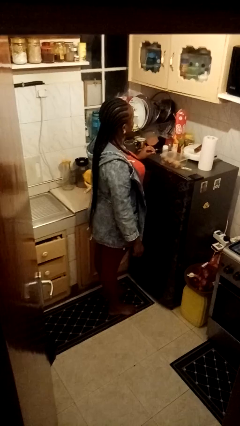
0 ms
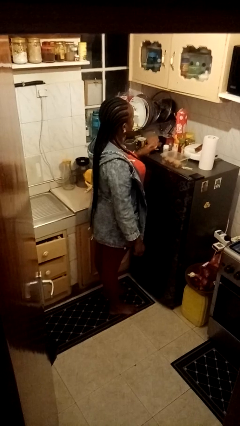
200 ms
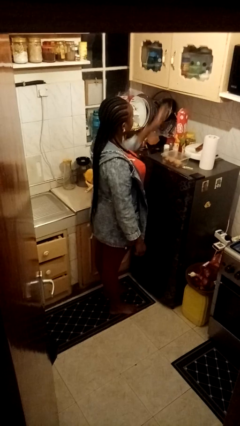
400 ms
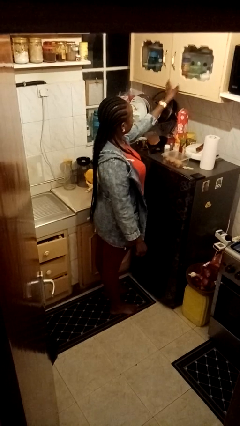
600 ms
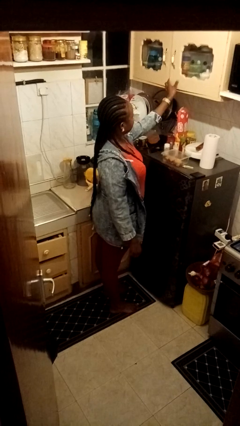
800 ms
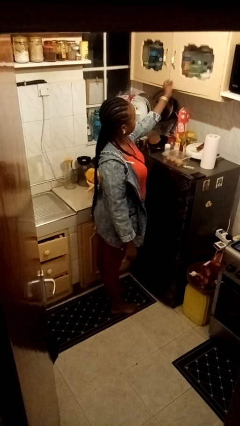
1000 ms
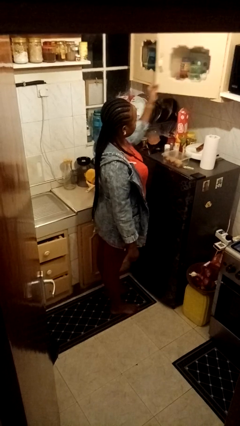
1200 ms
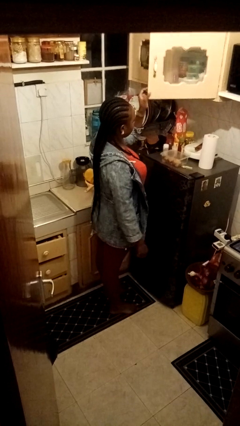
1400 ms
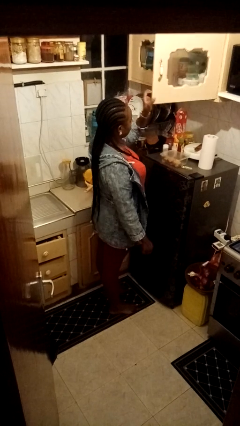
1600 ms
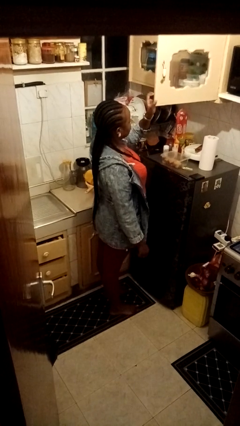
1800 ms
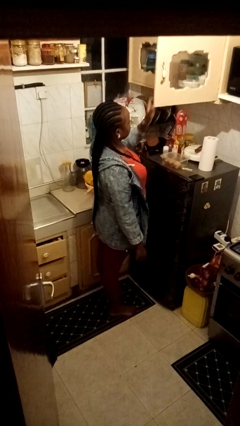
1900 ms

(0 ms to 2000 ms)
person opens cabinet

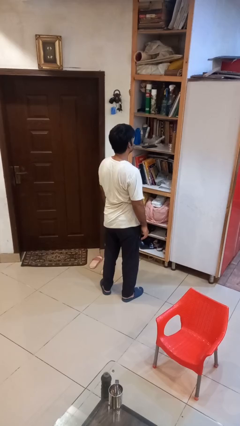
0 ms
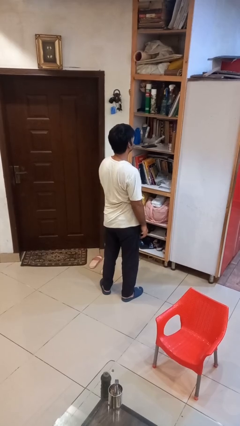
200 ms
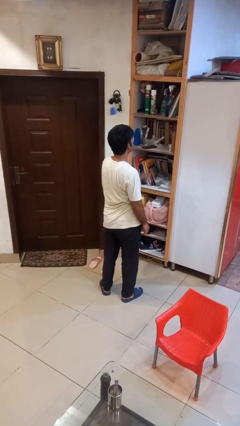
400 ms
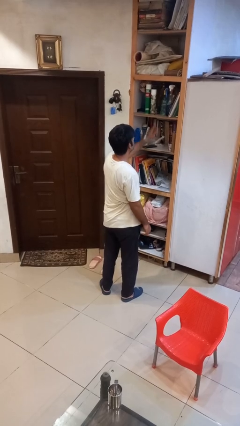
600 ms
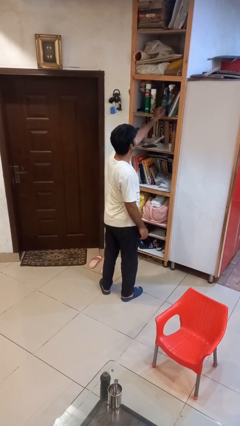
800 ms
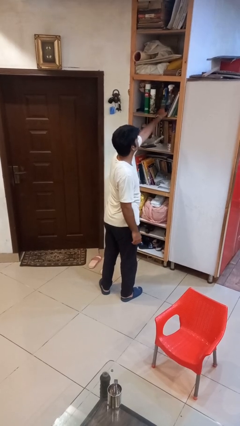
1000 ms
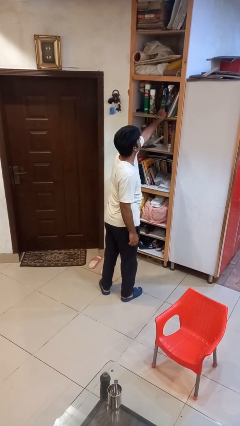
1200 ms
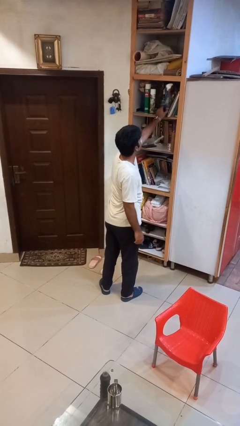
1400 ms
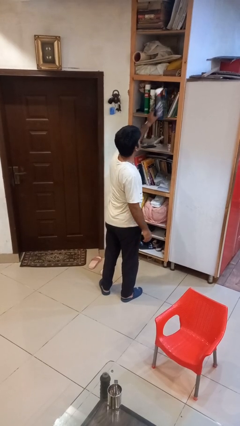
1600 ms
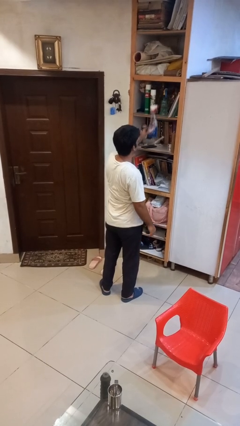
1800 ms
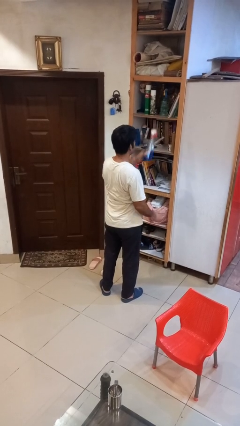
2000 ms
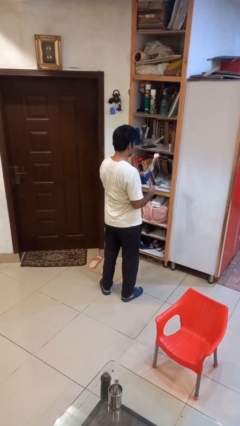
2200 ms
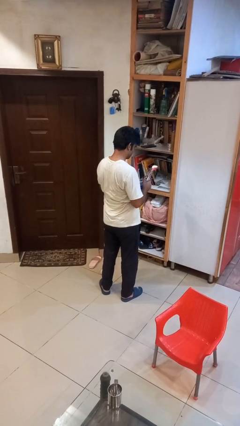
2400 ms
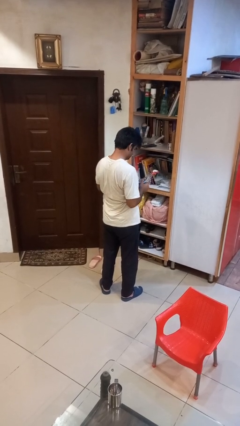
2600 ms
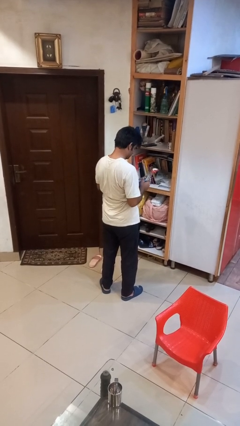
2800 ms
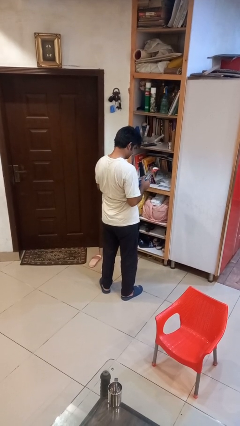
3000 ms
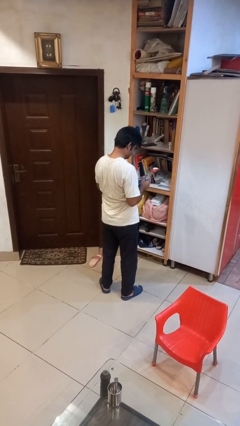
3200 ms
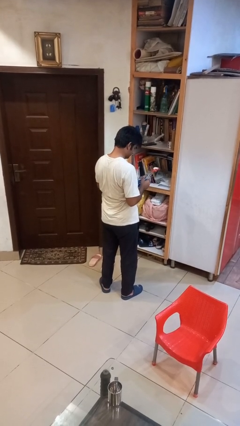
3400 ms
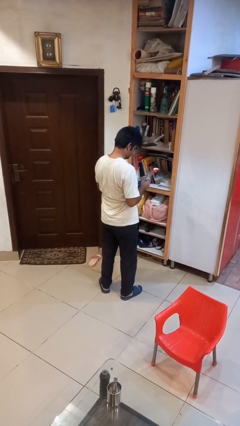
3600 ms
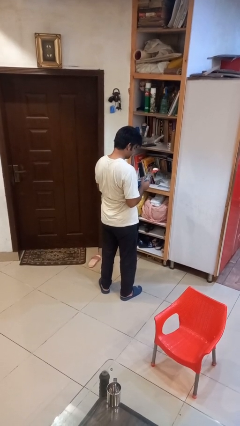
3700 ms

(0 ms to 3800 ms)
person picks up object from shelf

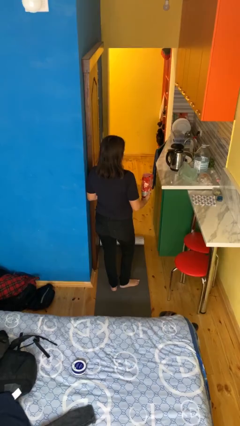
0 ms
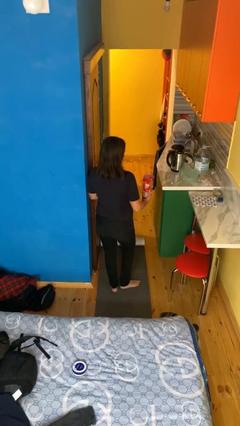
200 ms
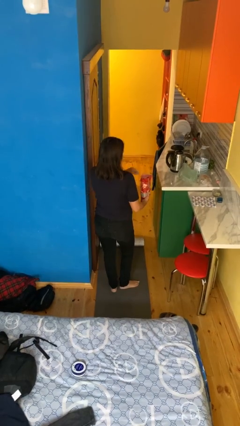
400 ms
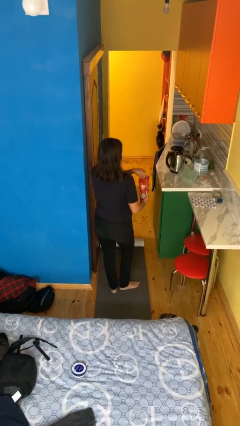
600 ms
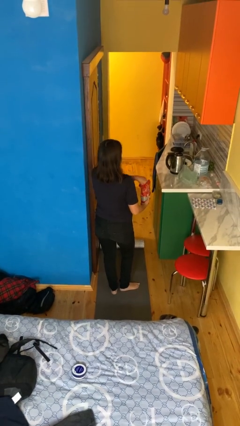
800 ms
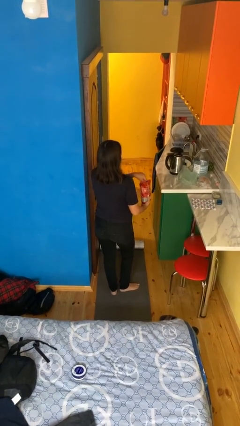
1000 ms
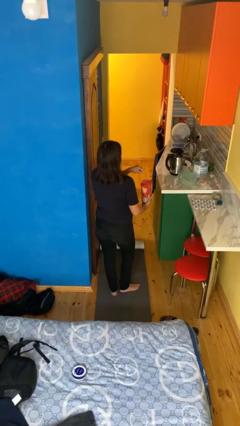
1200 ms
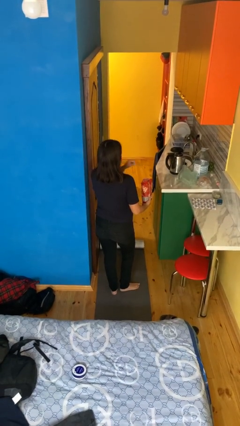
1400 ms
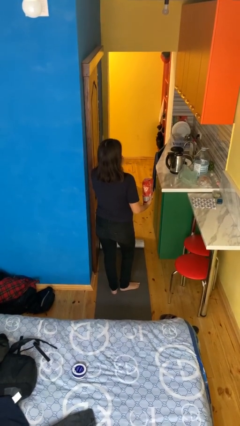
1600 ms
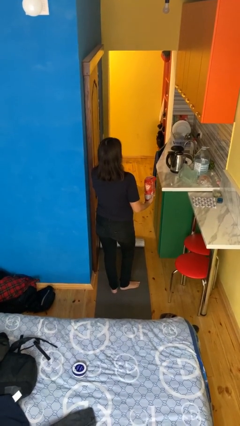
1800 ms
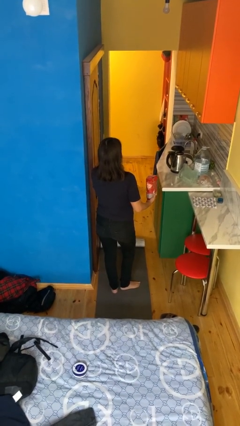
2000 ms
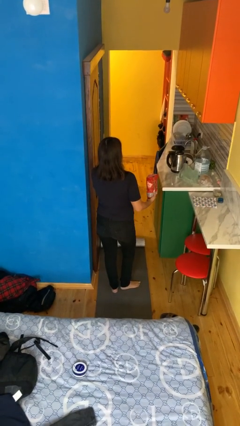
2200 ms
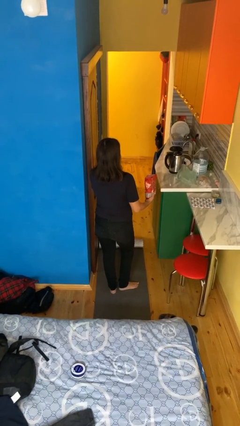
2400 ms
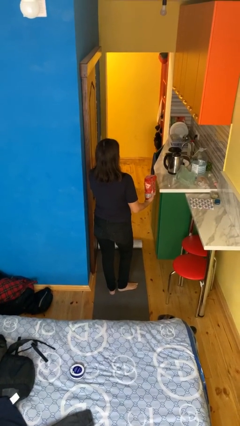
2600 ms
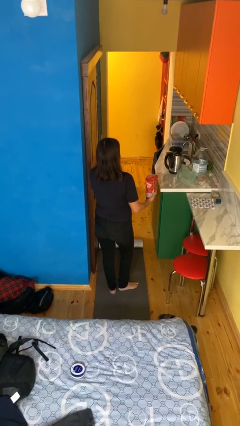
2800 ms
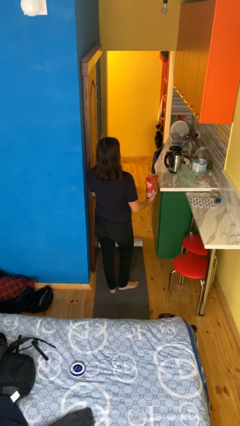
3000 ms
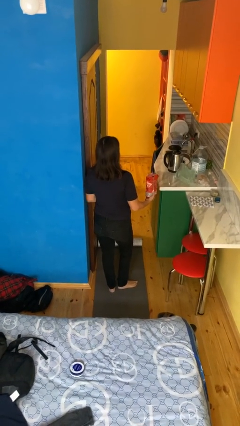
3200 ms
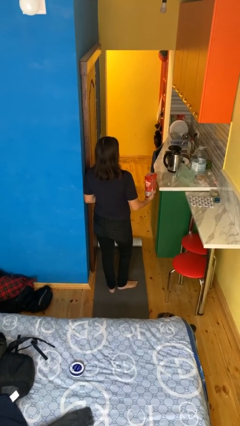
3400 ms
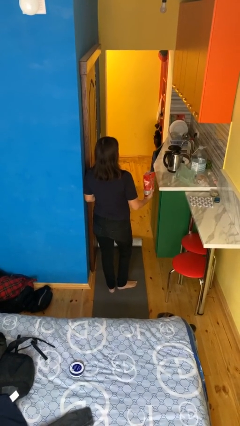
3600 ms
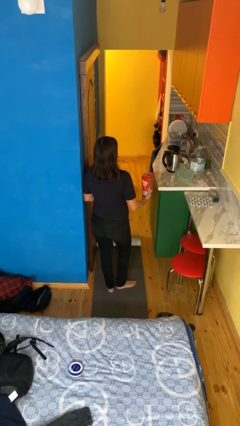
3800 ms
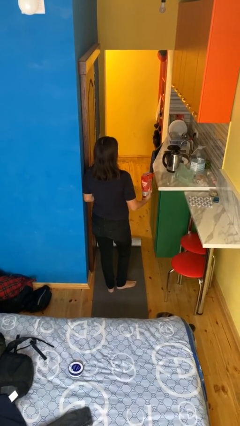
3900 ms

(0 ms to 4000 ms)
person eats snack from bag

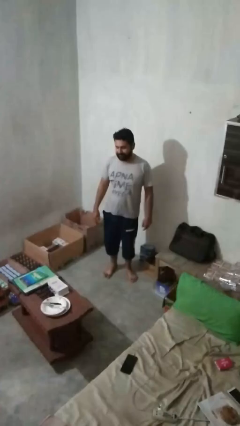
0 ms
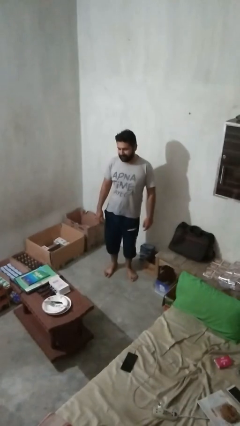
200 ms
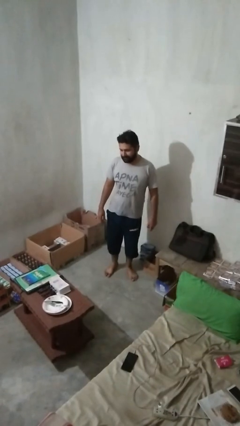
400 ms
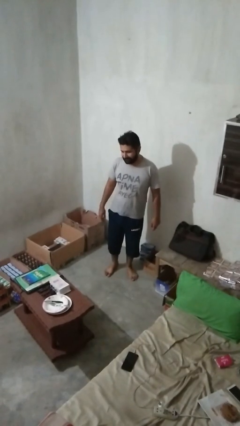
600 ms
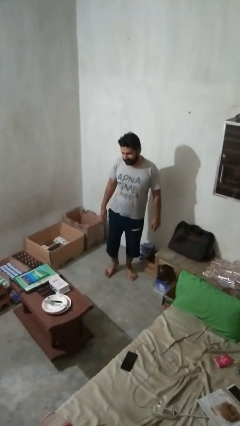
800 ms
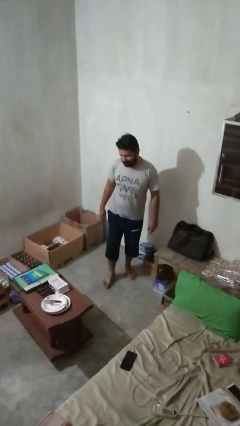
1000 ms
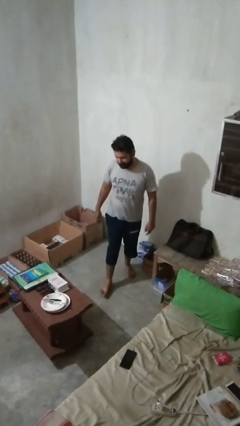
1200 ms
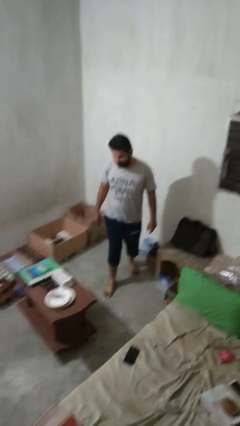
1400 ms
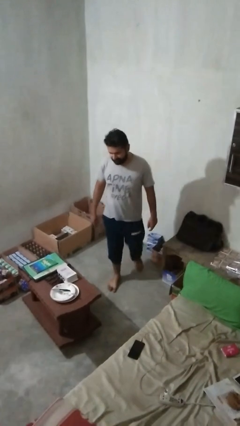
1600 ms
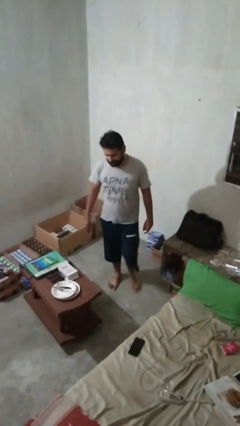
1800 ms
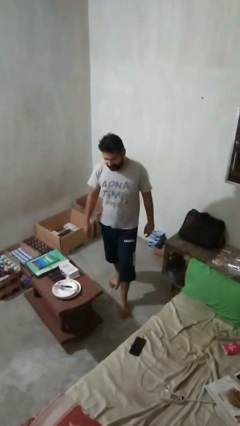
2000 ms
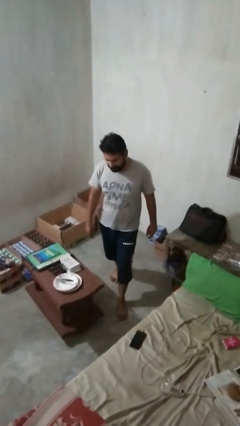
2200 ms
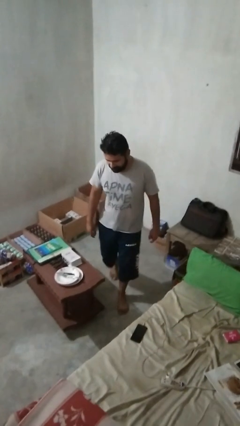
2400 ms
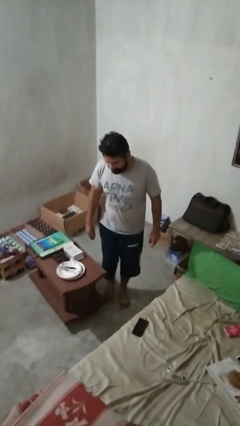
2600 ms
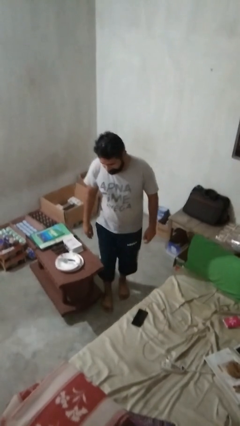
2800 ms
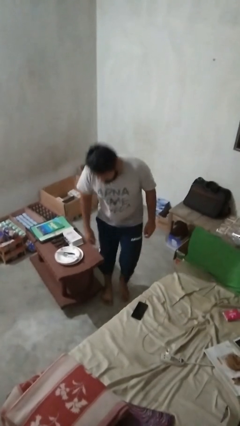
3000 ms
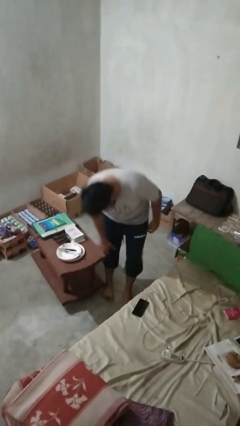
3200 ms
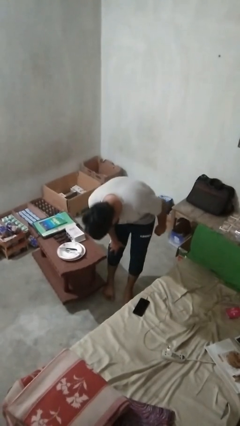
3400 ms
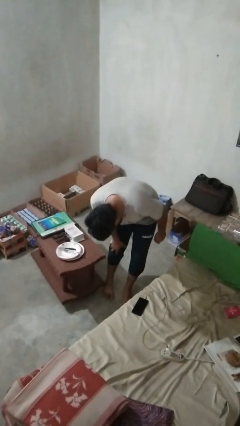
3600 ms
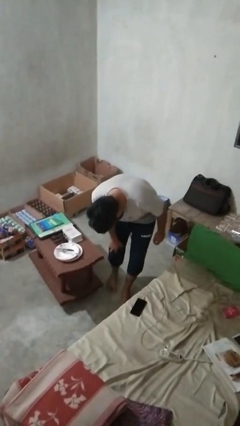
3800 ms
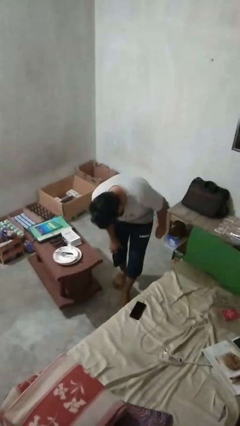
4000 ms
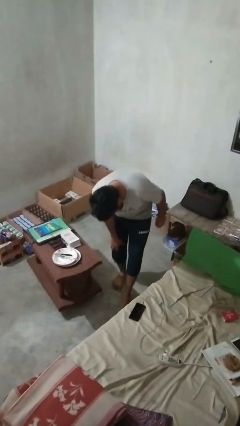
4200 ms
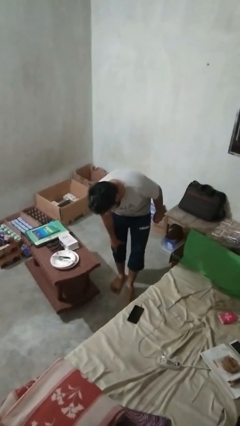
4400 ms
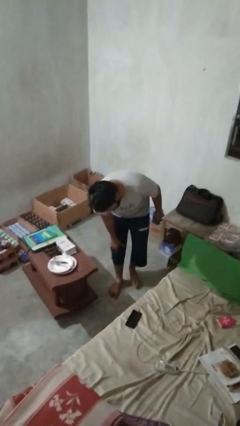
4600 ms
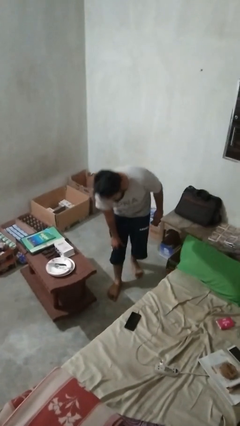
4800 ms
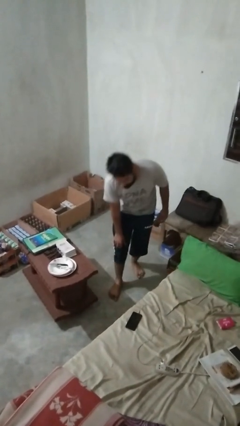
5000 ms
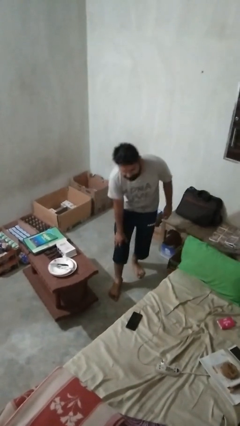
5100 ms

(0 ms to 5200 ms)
person bumps into table

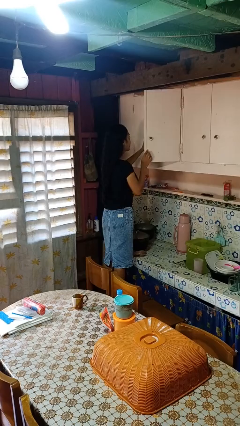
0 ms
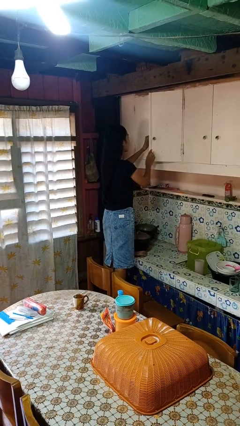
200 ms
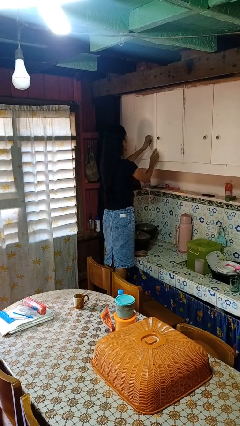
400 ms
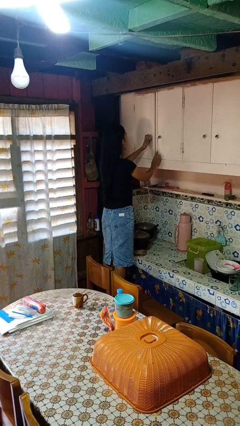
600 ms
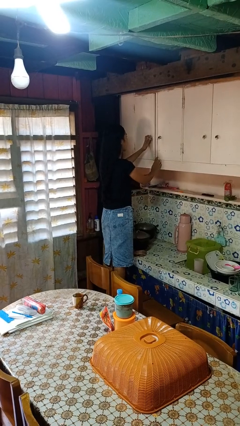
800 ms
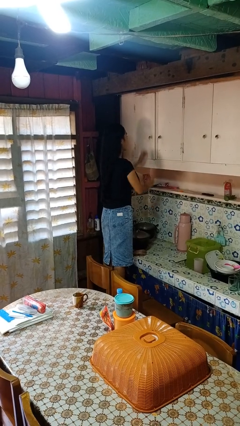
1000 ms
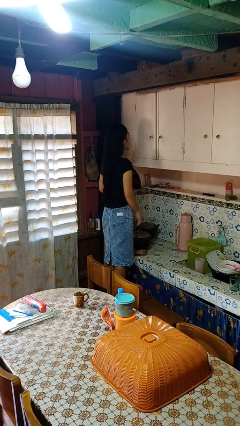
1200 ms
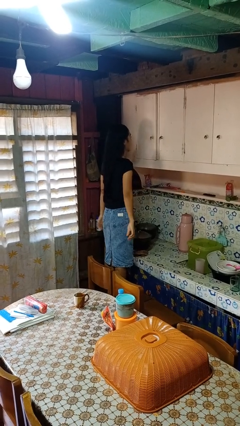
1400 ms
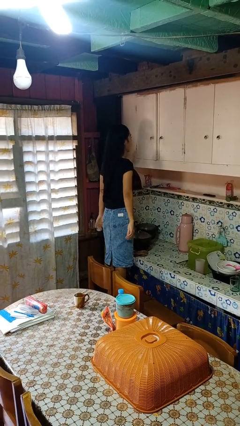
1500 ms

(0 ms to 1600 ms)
person closes cabinet

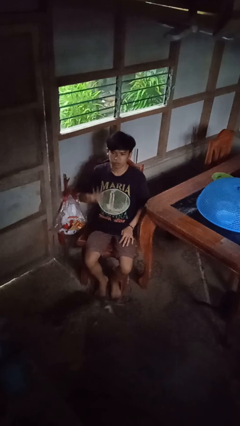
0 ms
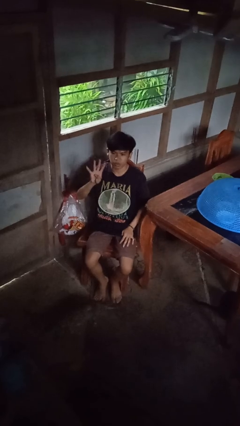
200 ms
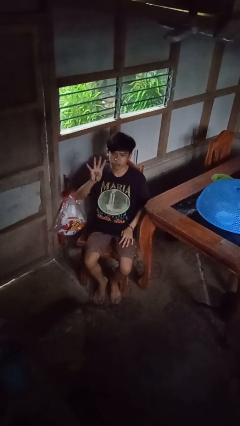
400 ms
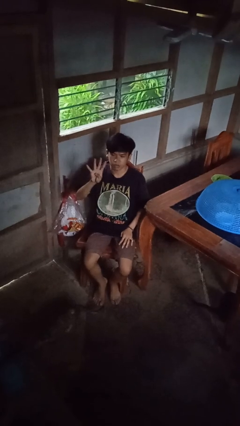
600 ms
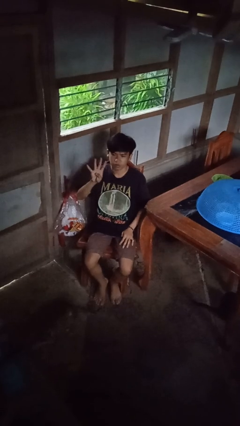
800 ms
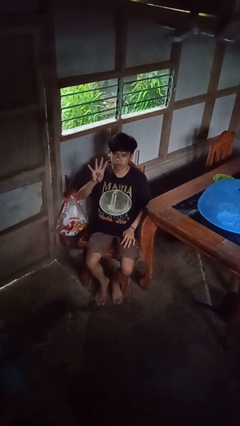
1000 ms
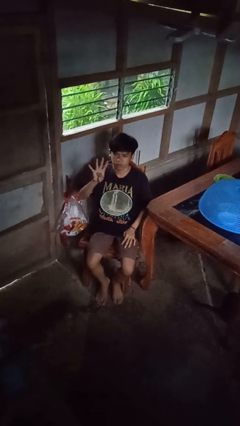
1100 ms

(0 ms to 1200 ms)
person gestures number four
